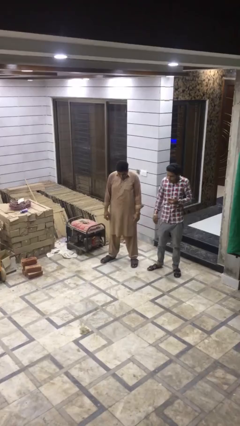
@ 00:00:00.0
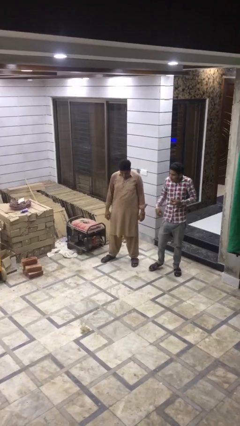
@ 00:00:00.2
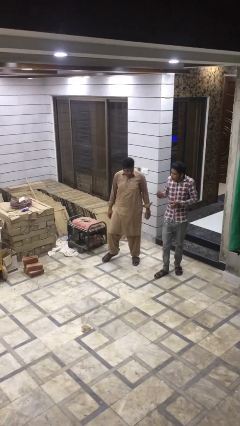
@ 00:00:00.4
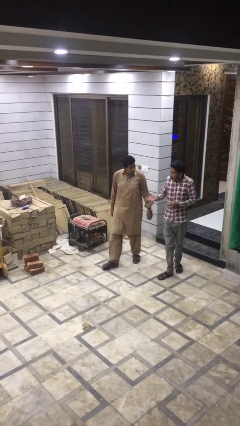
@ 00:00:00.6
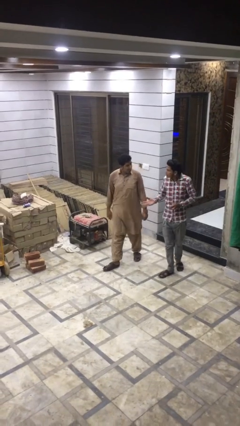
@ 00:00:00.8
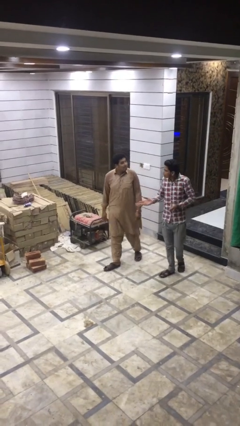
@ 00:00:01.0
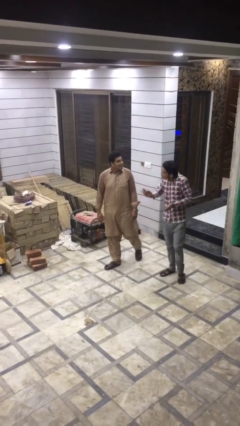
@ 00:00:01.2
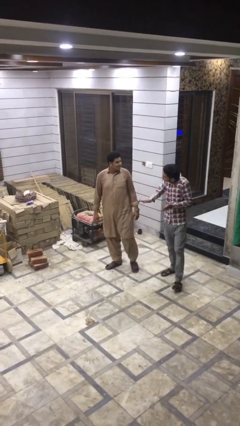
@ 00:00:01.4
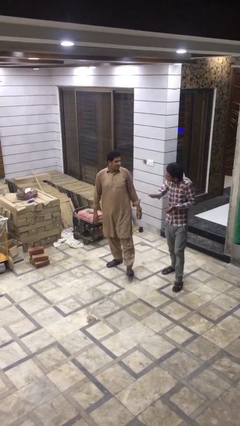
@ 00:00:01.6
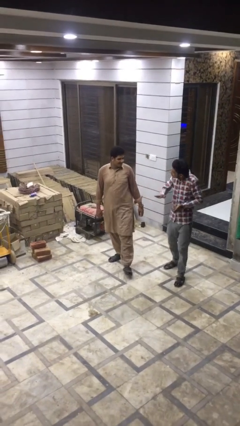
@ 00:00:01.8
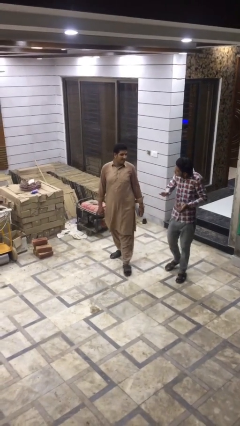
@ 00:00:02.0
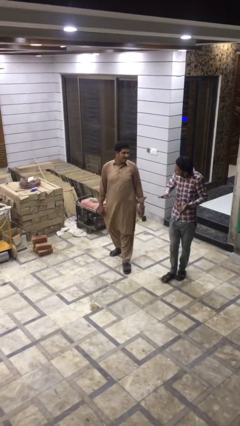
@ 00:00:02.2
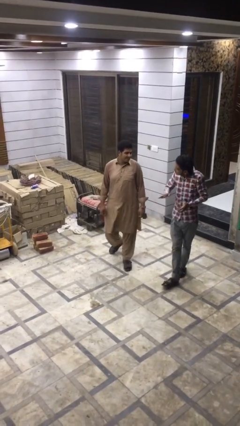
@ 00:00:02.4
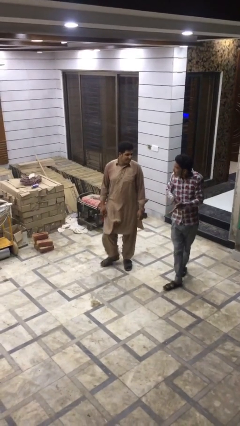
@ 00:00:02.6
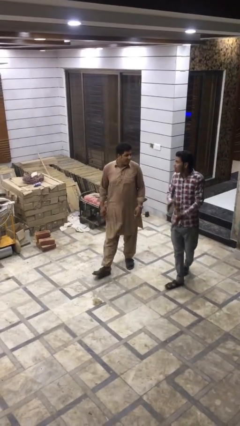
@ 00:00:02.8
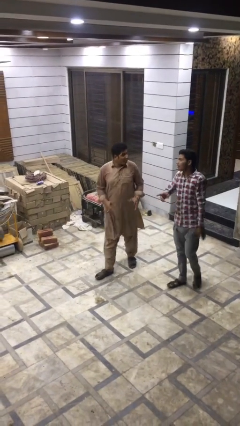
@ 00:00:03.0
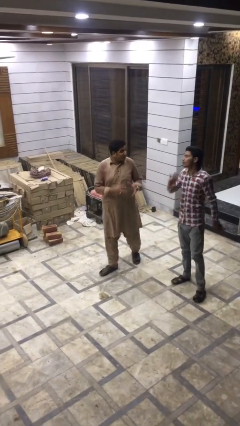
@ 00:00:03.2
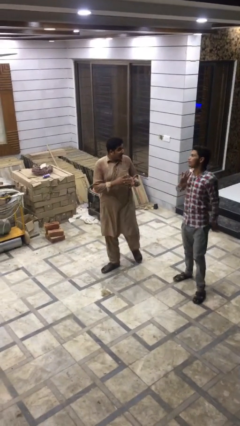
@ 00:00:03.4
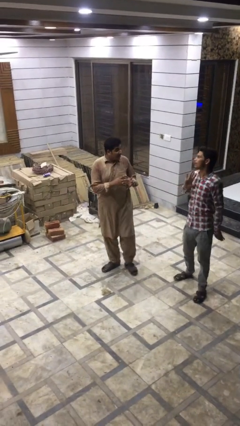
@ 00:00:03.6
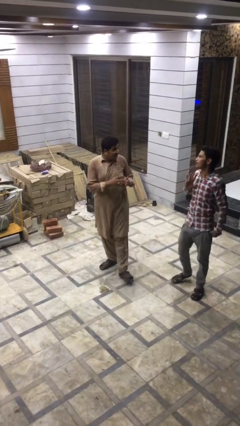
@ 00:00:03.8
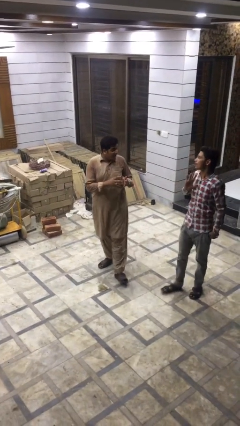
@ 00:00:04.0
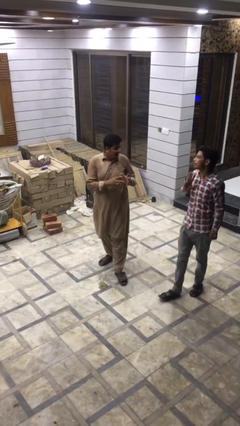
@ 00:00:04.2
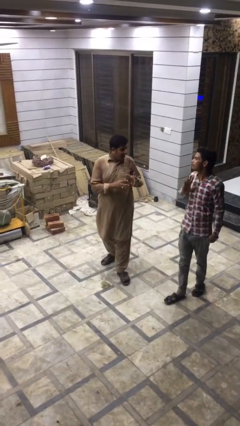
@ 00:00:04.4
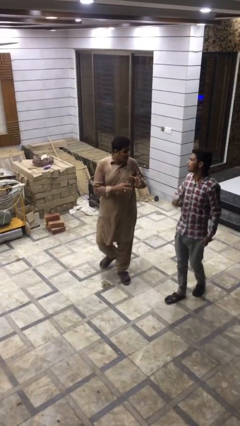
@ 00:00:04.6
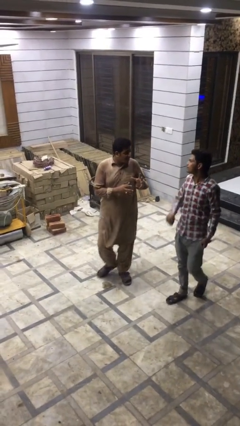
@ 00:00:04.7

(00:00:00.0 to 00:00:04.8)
person talks to person

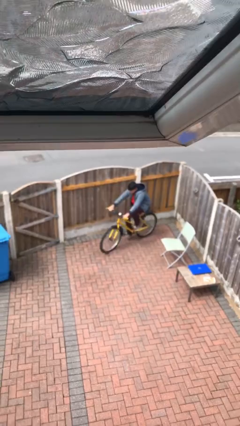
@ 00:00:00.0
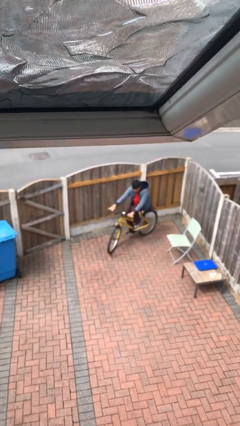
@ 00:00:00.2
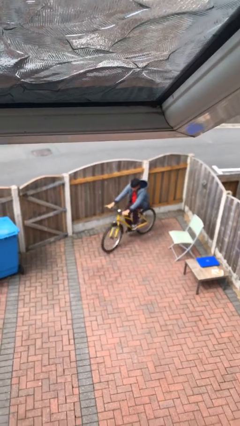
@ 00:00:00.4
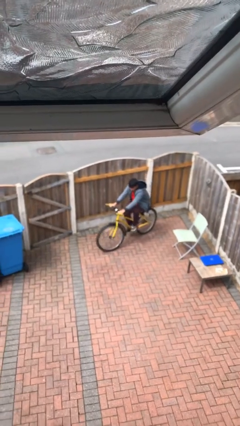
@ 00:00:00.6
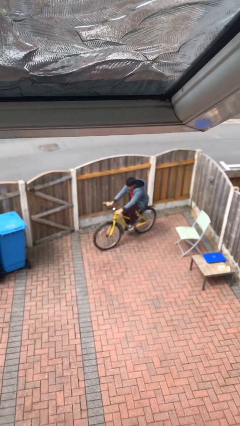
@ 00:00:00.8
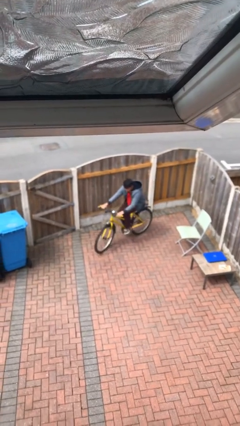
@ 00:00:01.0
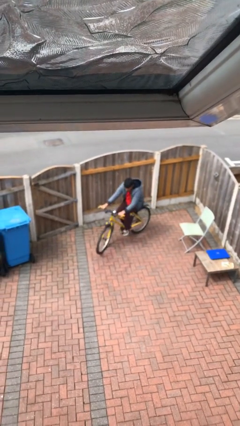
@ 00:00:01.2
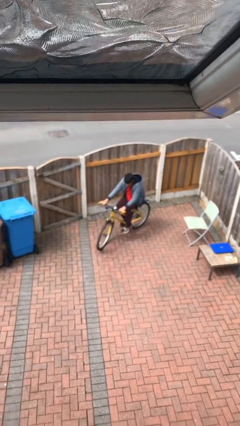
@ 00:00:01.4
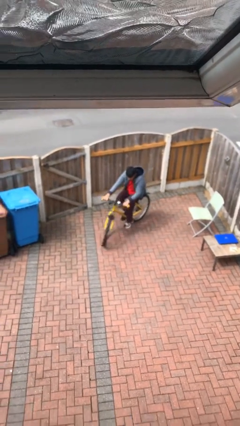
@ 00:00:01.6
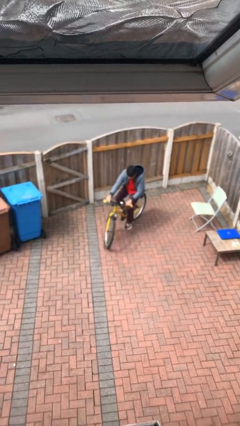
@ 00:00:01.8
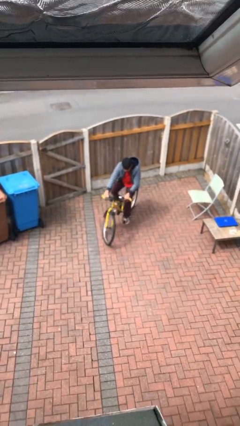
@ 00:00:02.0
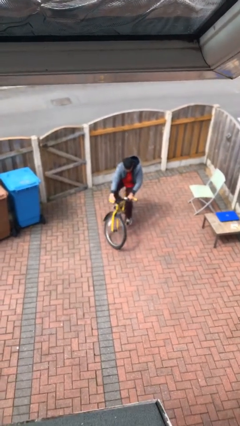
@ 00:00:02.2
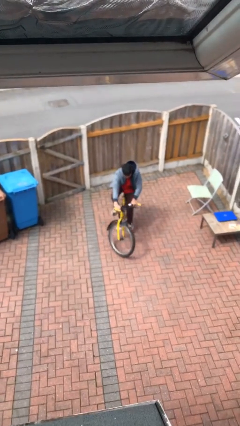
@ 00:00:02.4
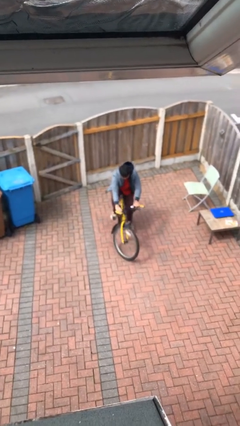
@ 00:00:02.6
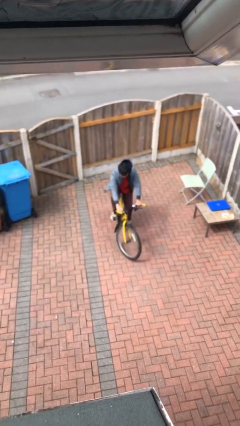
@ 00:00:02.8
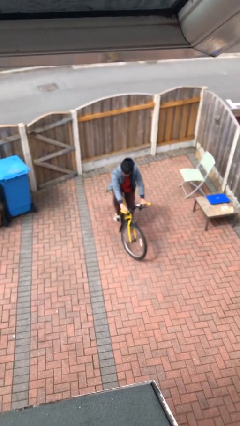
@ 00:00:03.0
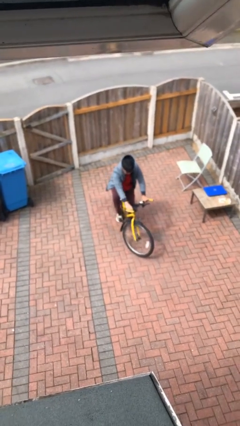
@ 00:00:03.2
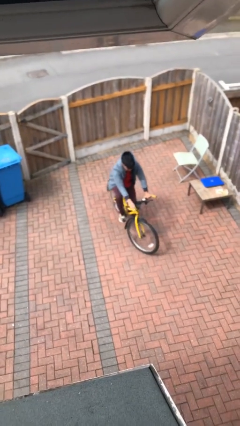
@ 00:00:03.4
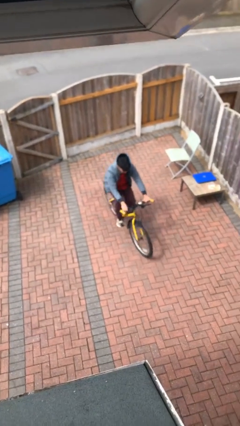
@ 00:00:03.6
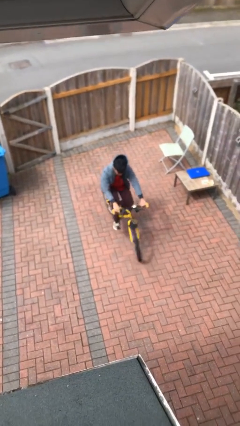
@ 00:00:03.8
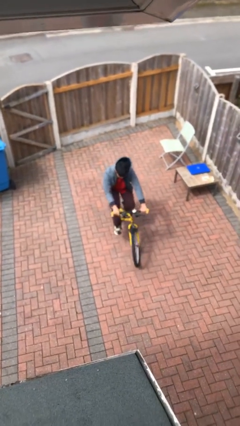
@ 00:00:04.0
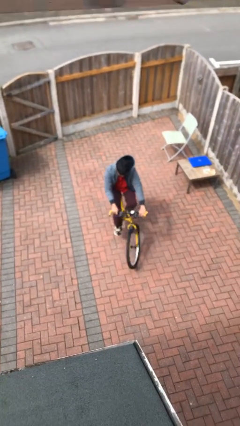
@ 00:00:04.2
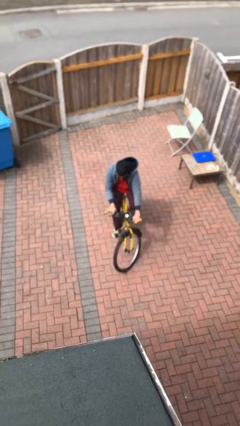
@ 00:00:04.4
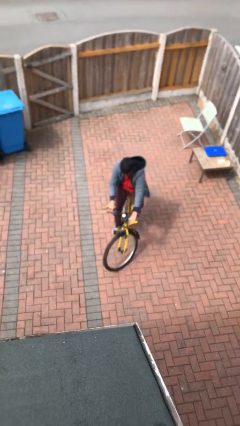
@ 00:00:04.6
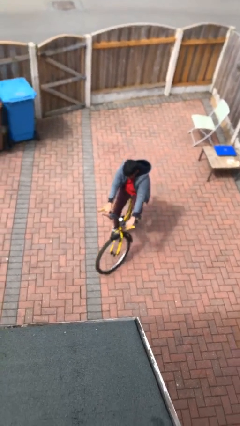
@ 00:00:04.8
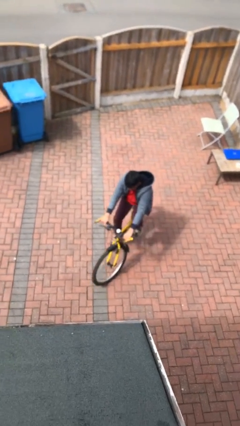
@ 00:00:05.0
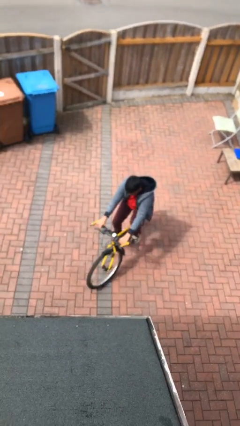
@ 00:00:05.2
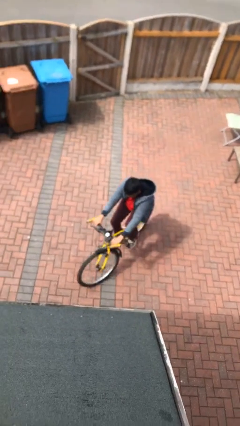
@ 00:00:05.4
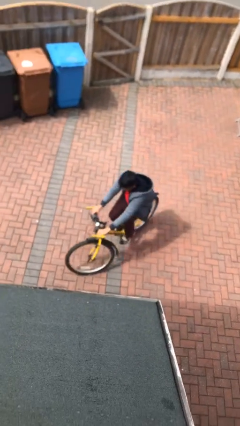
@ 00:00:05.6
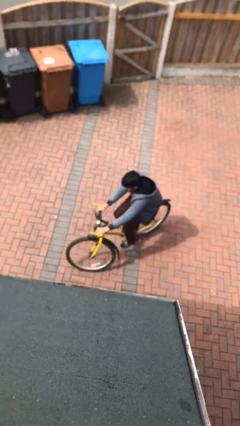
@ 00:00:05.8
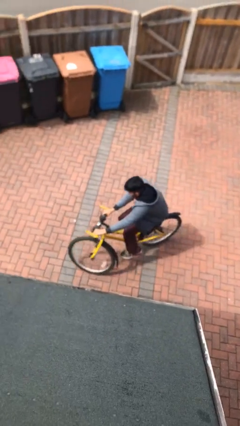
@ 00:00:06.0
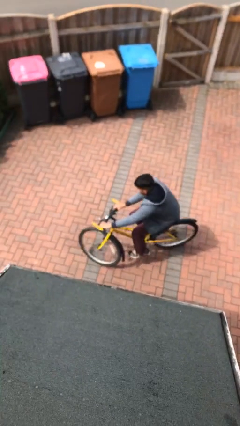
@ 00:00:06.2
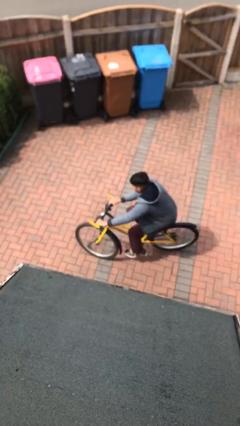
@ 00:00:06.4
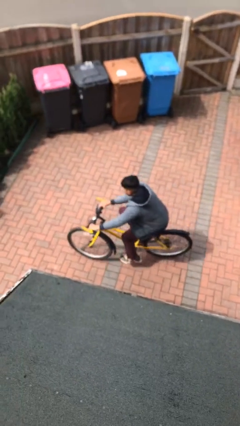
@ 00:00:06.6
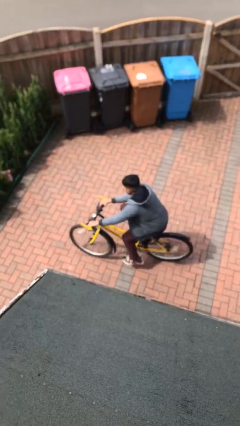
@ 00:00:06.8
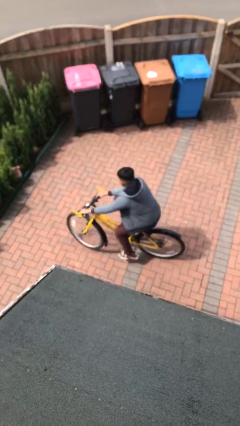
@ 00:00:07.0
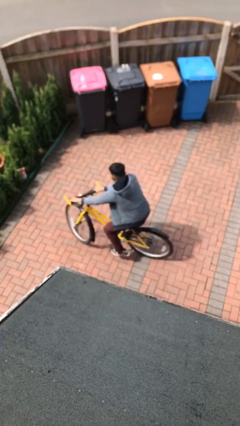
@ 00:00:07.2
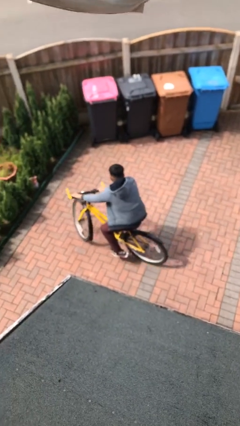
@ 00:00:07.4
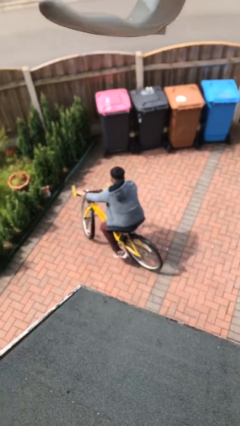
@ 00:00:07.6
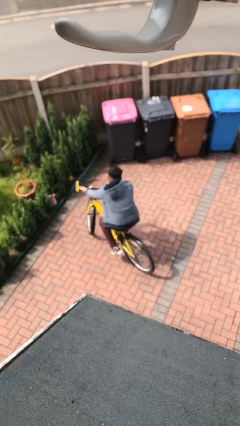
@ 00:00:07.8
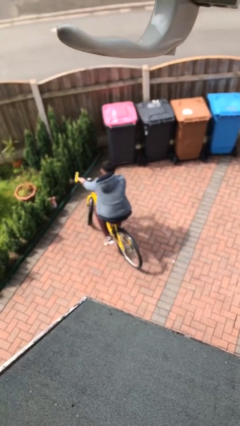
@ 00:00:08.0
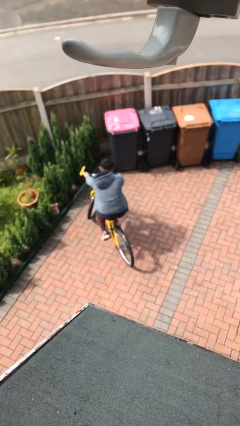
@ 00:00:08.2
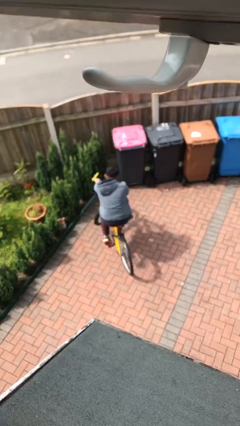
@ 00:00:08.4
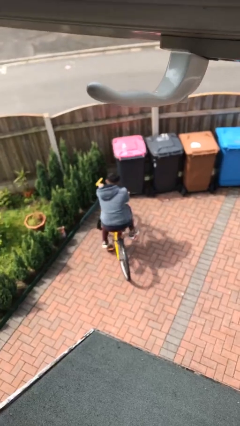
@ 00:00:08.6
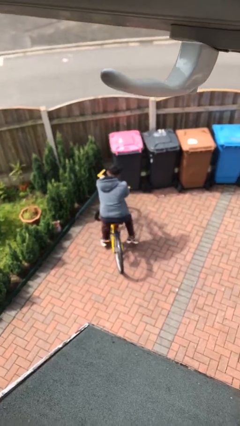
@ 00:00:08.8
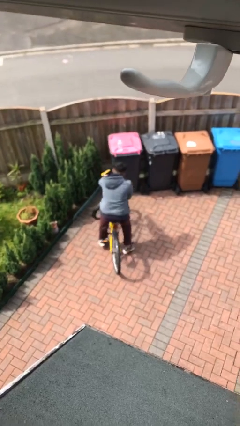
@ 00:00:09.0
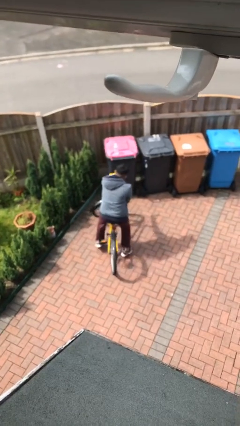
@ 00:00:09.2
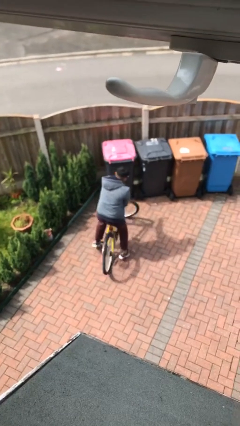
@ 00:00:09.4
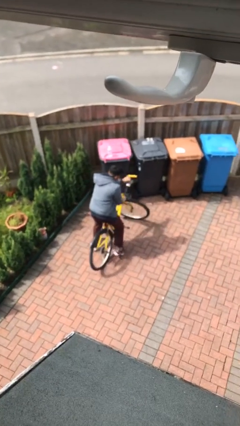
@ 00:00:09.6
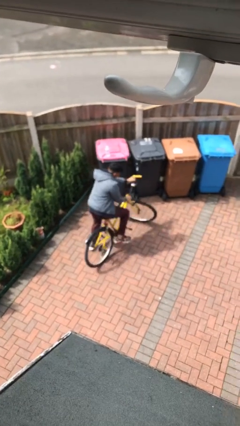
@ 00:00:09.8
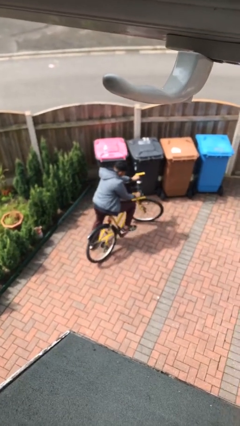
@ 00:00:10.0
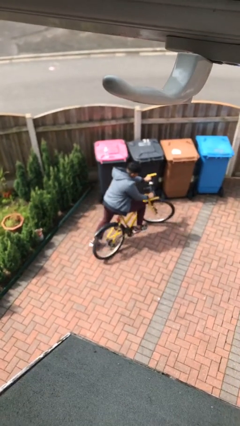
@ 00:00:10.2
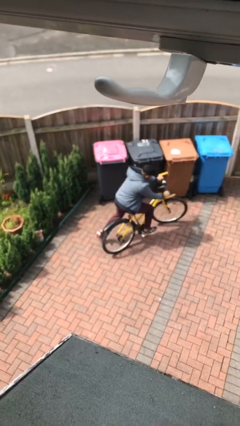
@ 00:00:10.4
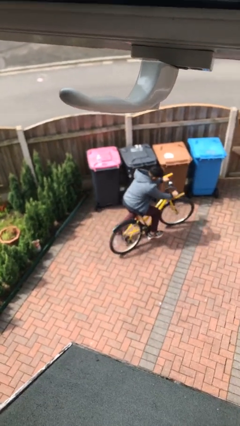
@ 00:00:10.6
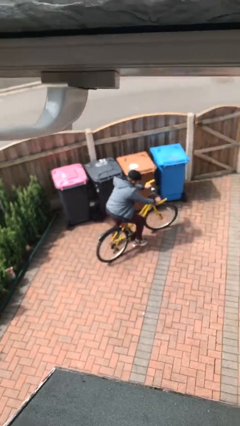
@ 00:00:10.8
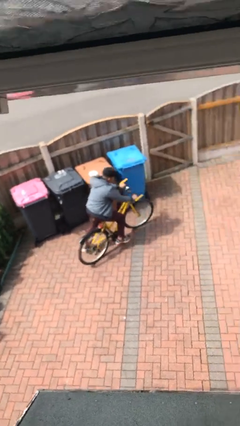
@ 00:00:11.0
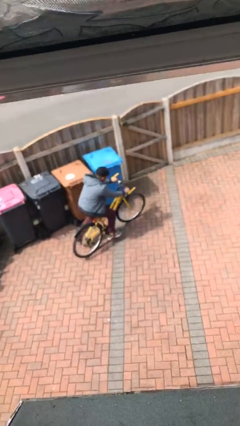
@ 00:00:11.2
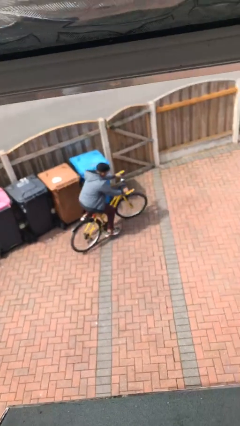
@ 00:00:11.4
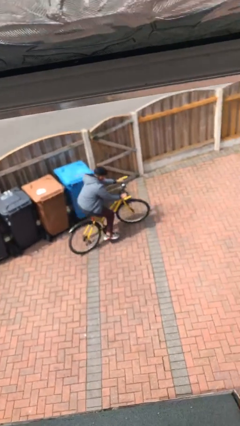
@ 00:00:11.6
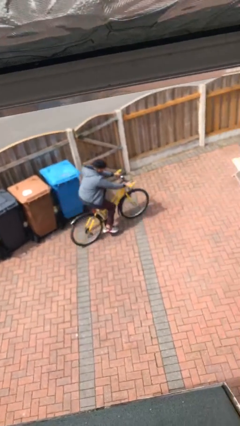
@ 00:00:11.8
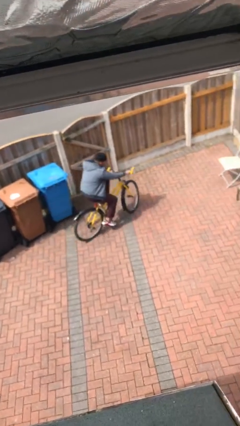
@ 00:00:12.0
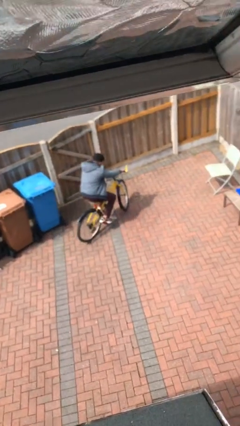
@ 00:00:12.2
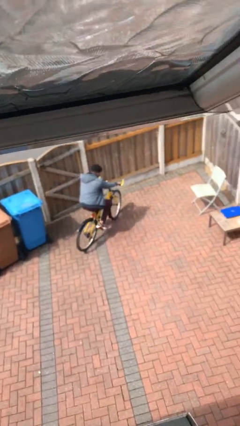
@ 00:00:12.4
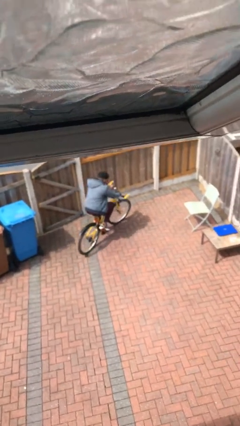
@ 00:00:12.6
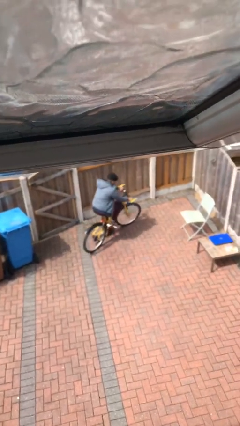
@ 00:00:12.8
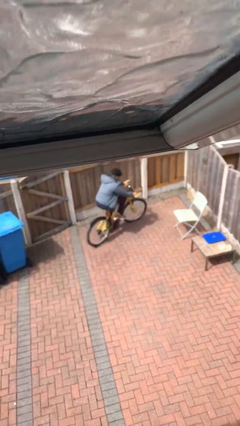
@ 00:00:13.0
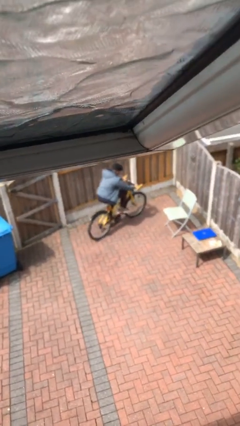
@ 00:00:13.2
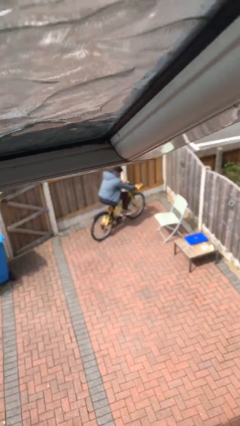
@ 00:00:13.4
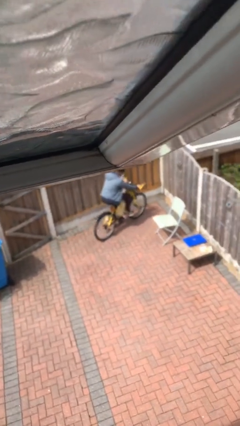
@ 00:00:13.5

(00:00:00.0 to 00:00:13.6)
person rides bicycle
